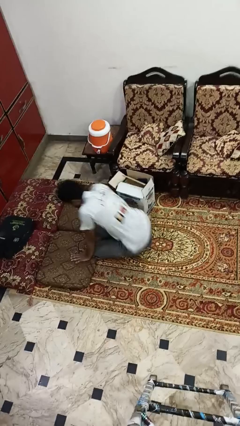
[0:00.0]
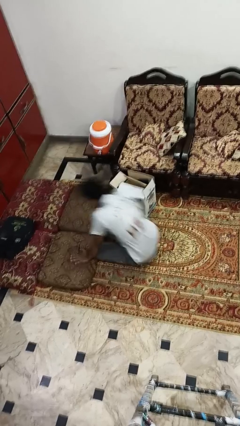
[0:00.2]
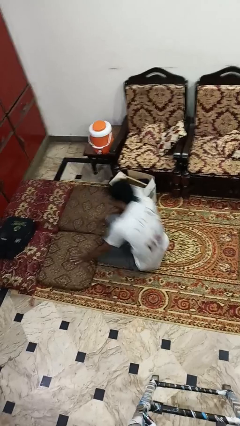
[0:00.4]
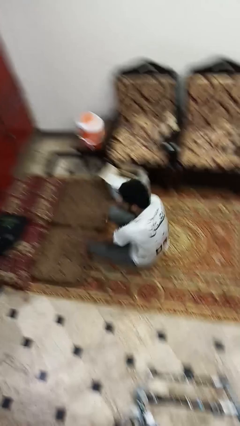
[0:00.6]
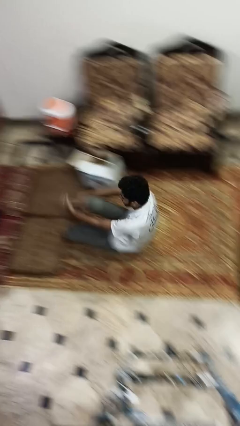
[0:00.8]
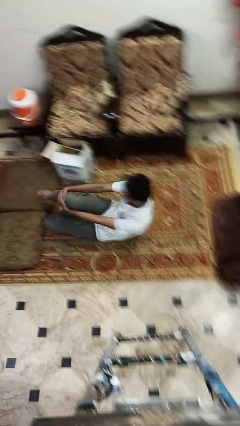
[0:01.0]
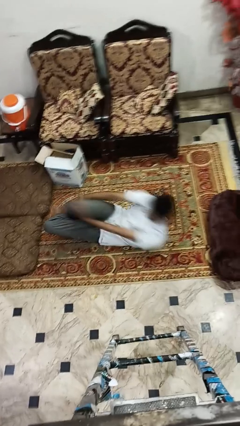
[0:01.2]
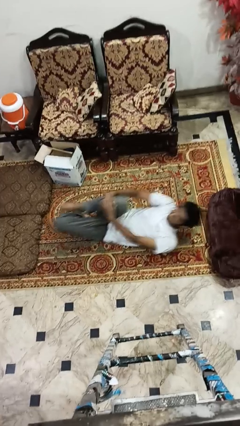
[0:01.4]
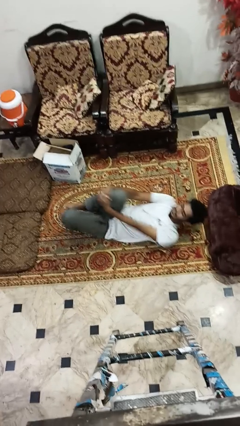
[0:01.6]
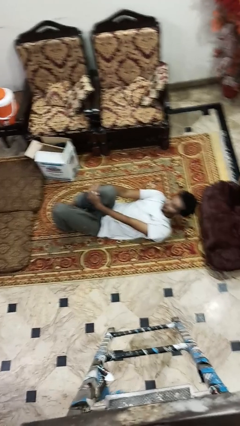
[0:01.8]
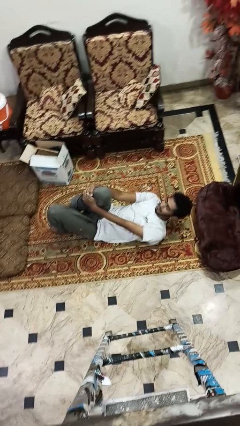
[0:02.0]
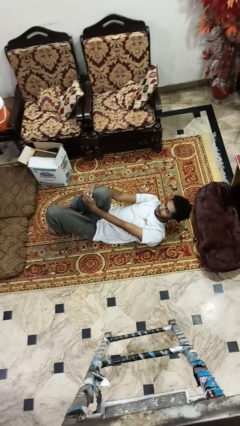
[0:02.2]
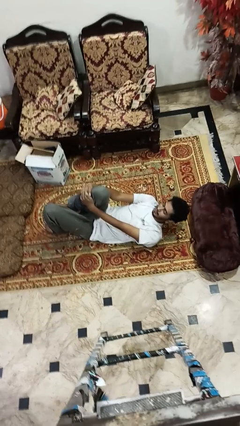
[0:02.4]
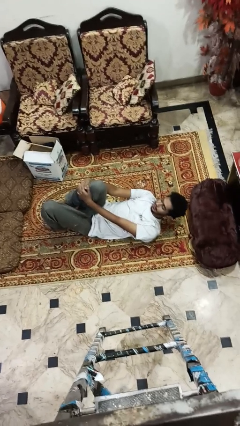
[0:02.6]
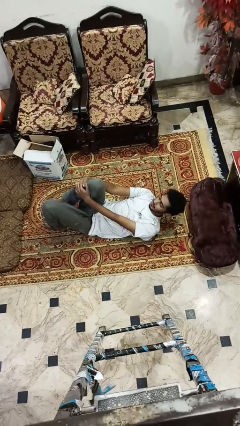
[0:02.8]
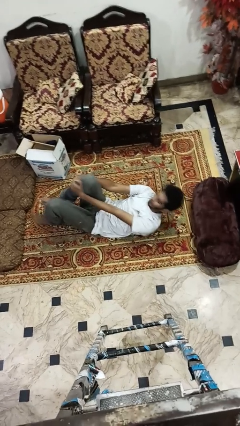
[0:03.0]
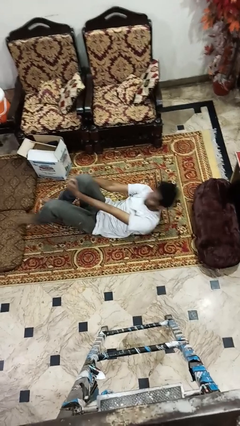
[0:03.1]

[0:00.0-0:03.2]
person lies down on floor

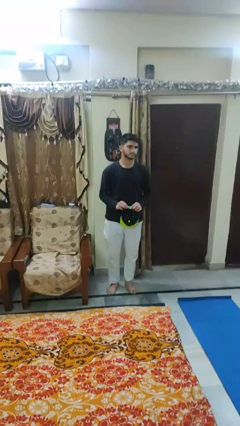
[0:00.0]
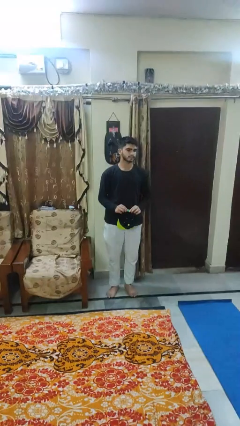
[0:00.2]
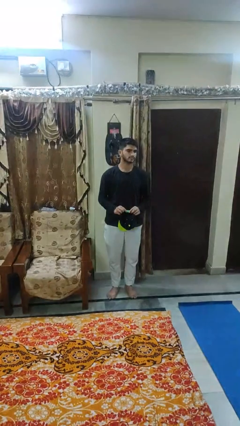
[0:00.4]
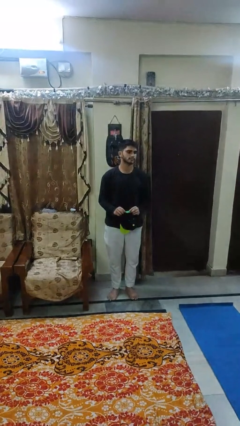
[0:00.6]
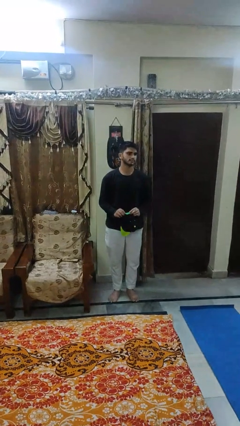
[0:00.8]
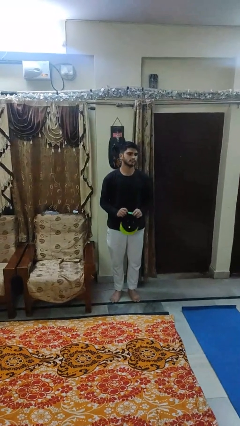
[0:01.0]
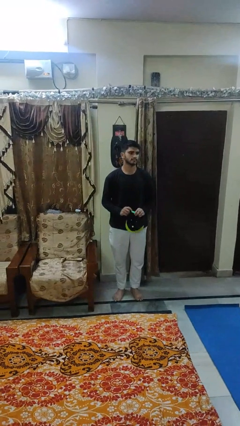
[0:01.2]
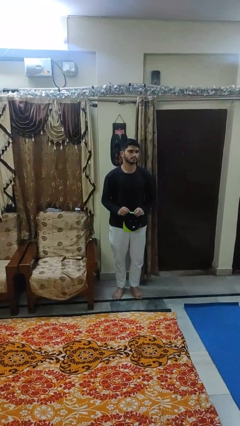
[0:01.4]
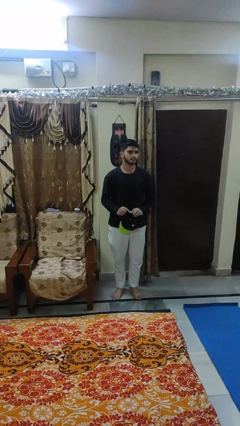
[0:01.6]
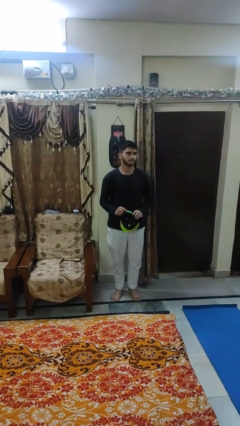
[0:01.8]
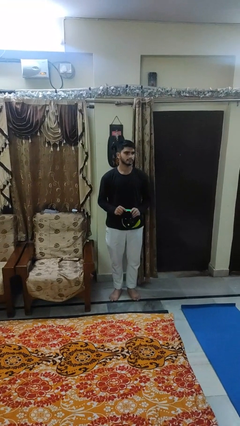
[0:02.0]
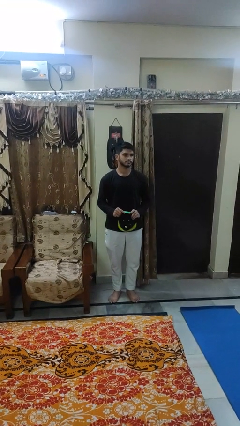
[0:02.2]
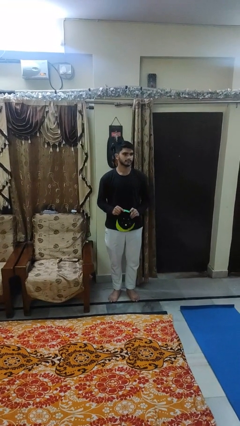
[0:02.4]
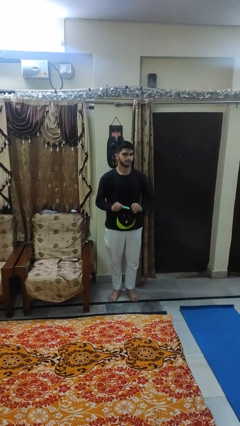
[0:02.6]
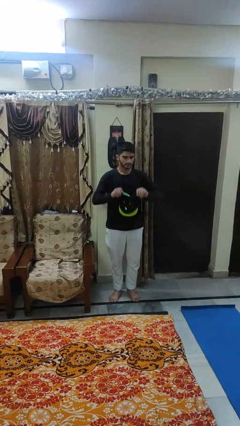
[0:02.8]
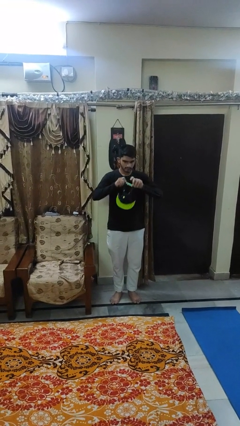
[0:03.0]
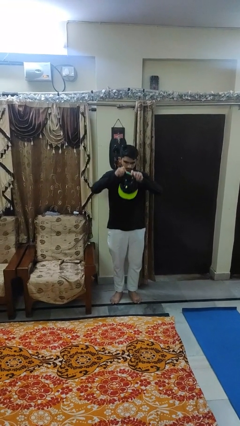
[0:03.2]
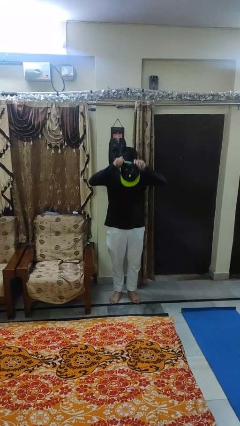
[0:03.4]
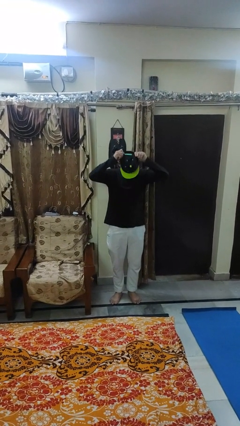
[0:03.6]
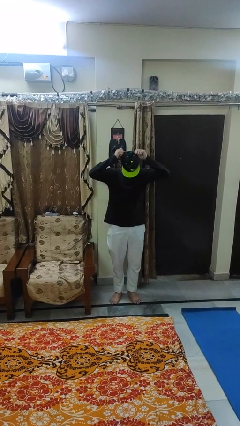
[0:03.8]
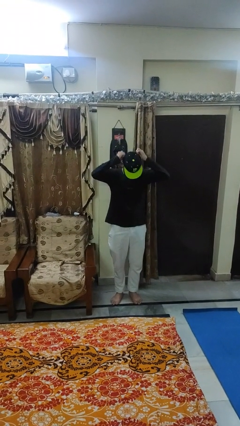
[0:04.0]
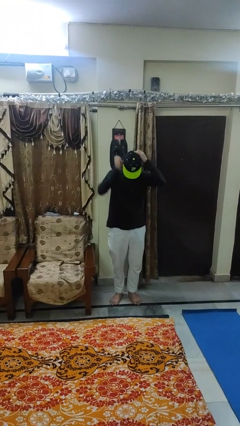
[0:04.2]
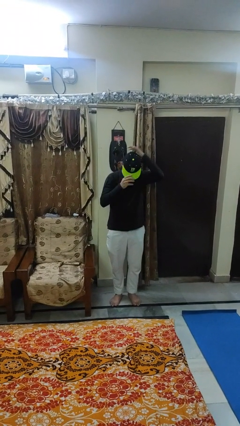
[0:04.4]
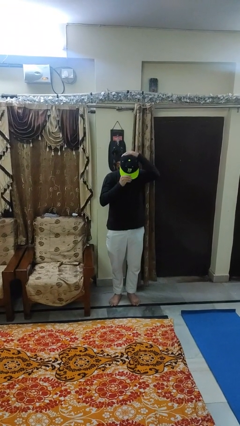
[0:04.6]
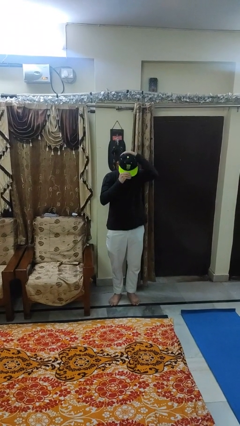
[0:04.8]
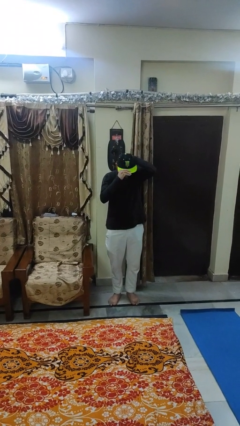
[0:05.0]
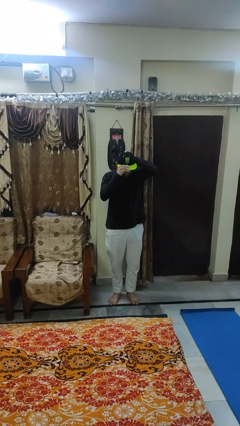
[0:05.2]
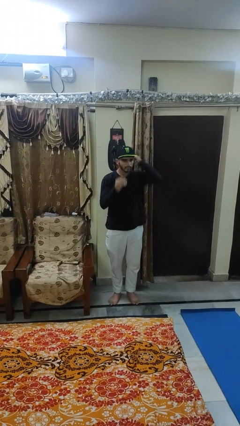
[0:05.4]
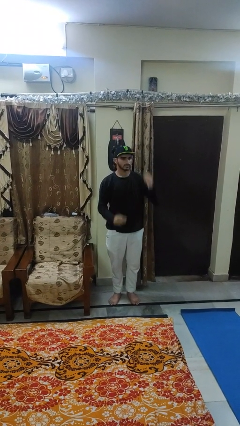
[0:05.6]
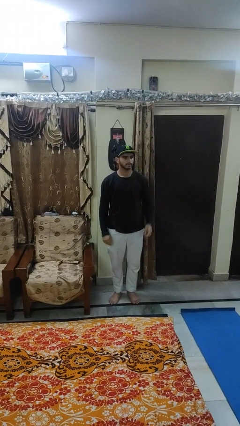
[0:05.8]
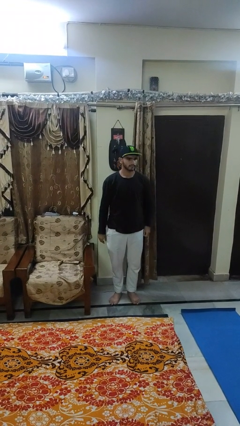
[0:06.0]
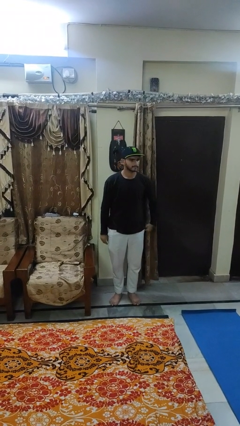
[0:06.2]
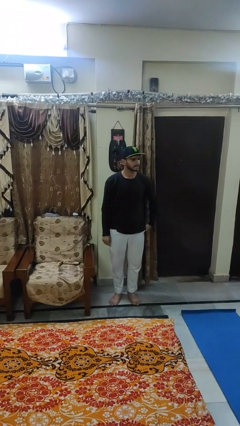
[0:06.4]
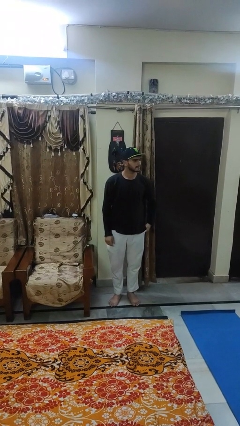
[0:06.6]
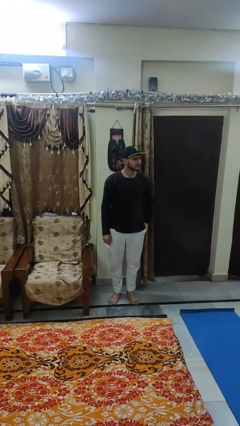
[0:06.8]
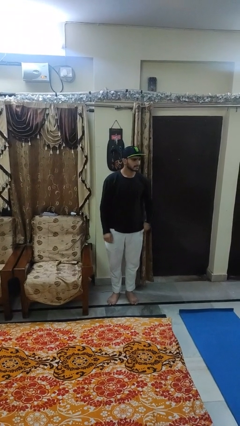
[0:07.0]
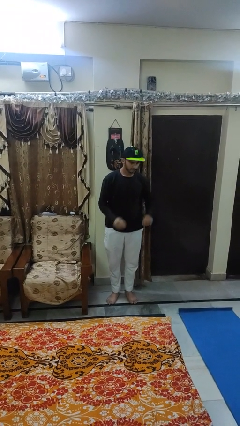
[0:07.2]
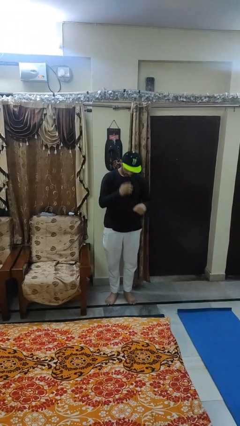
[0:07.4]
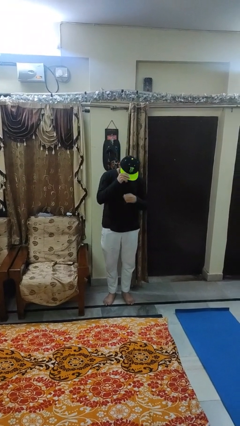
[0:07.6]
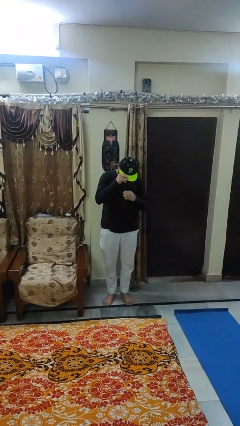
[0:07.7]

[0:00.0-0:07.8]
person puts on hat

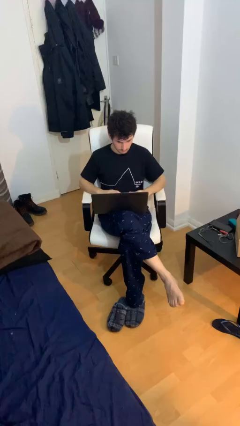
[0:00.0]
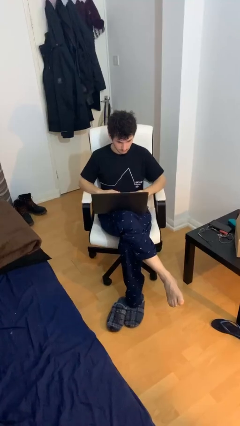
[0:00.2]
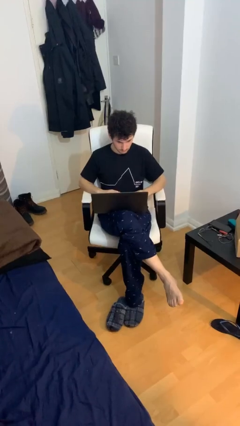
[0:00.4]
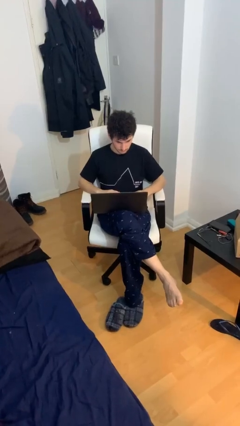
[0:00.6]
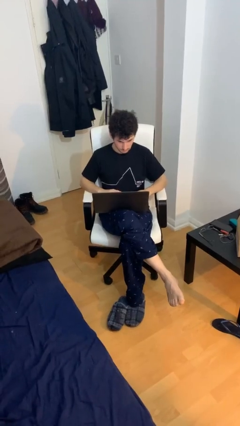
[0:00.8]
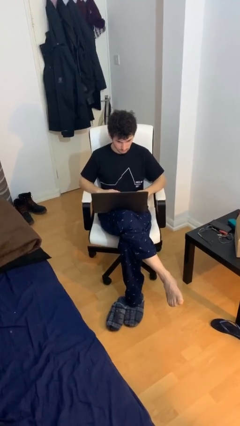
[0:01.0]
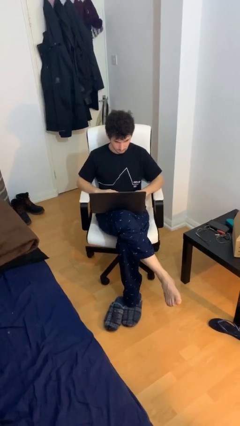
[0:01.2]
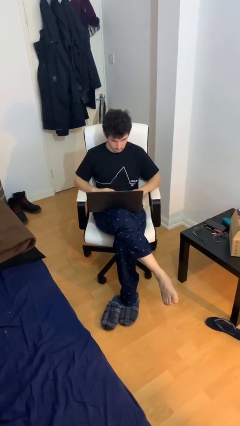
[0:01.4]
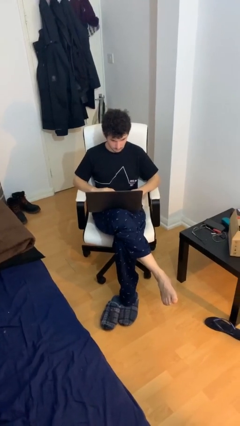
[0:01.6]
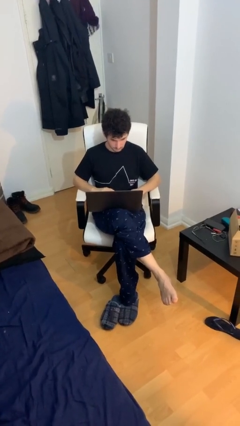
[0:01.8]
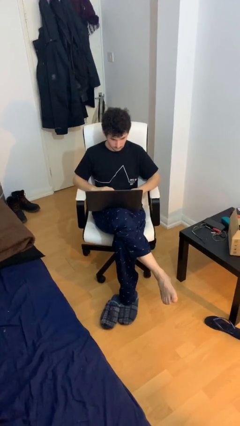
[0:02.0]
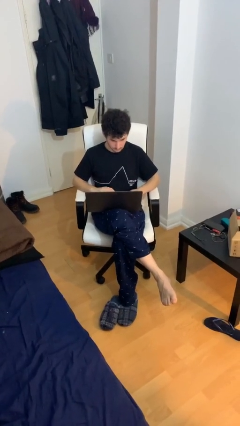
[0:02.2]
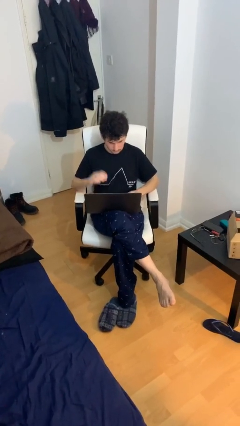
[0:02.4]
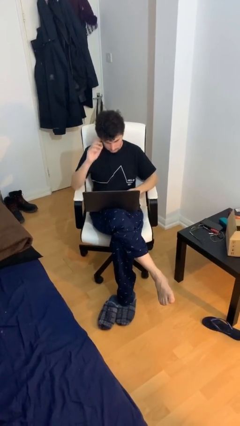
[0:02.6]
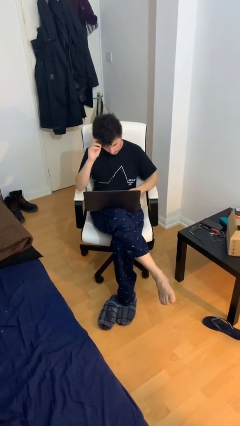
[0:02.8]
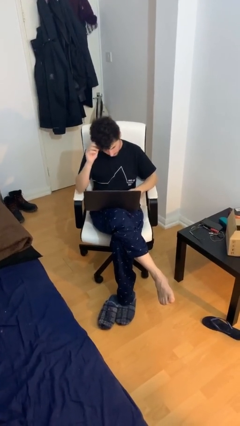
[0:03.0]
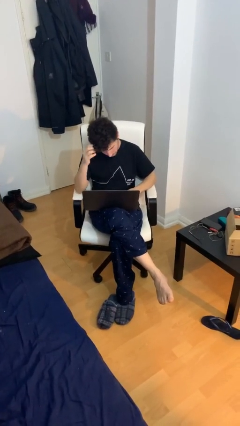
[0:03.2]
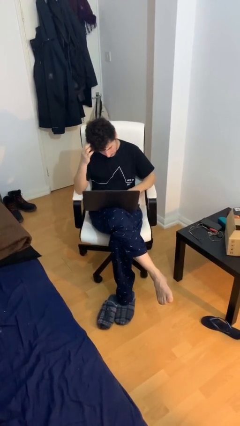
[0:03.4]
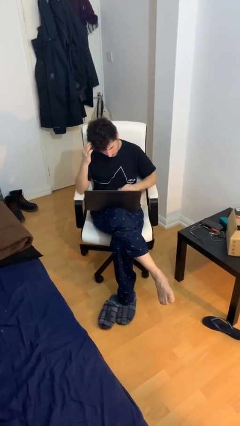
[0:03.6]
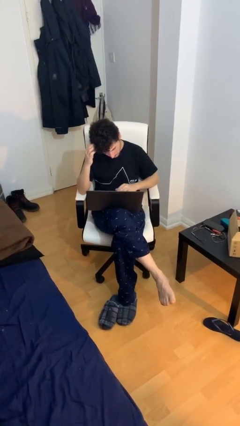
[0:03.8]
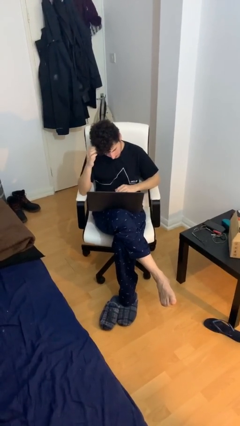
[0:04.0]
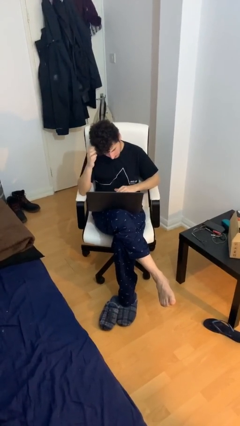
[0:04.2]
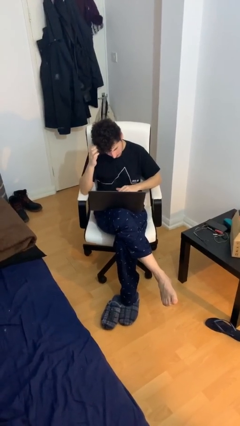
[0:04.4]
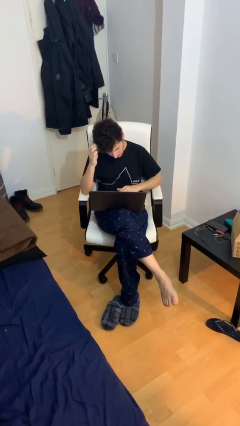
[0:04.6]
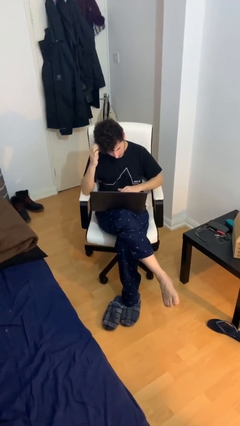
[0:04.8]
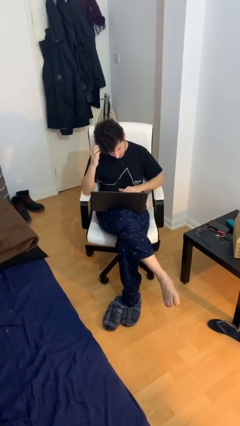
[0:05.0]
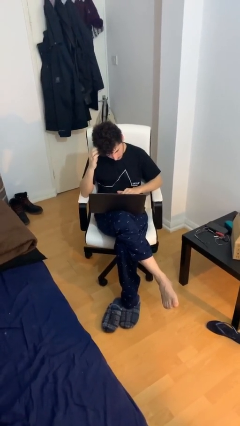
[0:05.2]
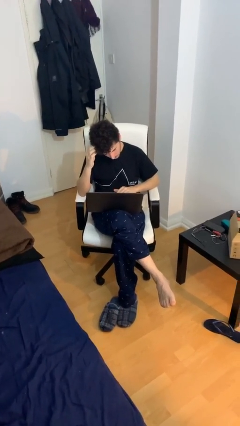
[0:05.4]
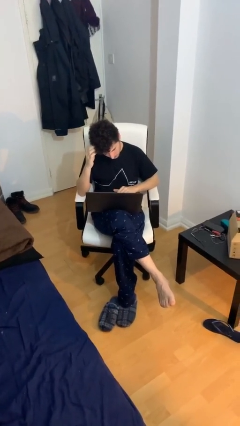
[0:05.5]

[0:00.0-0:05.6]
person interacts with laptop

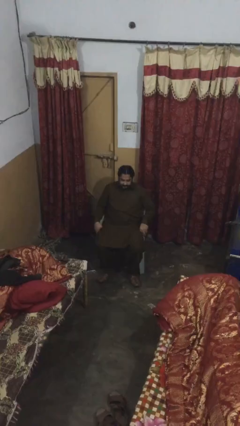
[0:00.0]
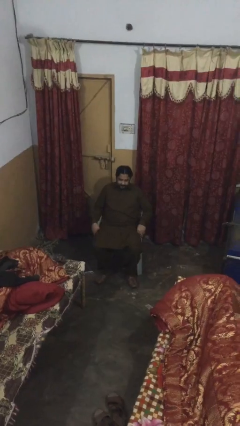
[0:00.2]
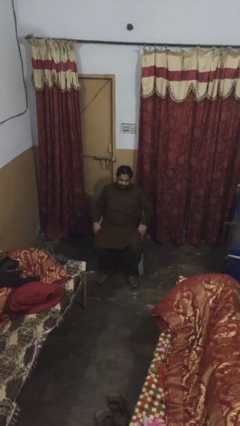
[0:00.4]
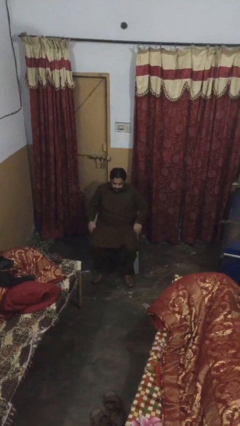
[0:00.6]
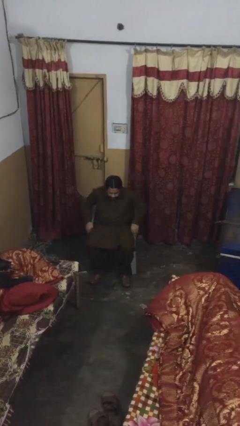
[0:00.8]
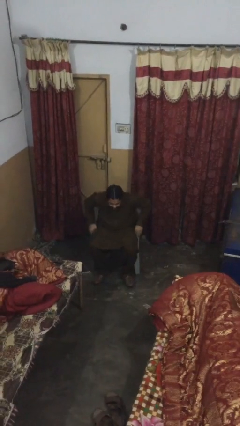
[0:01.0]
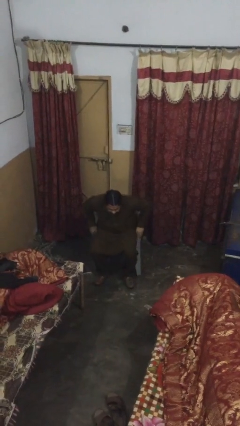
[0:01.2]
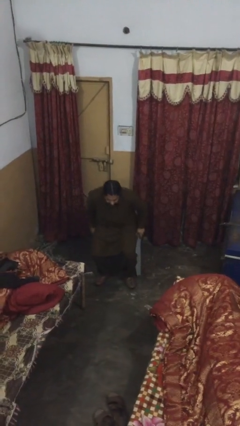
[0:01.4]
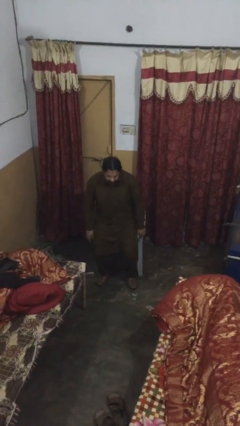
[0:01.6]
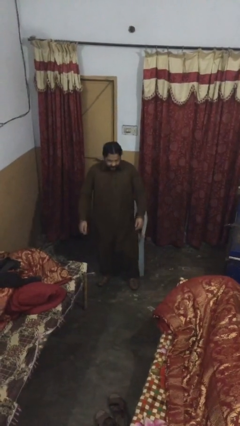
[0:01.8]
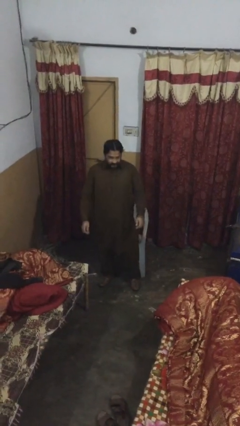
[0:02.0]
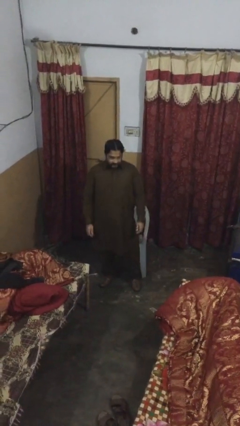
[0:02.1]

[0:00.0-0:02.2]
person stands up
